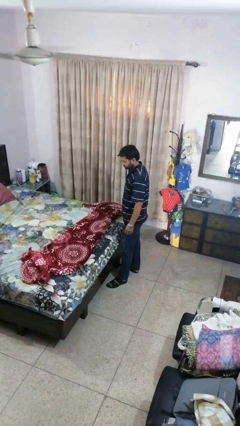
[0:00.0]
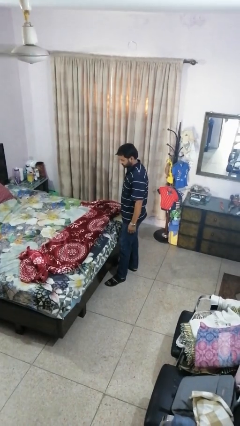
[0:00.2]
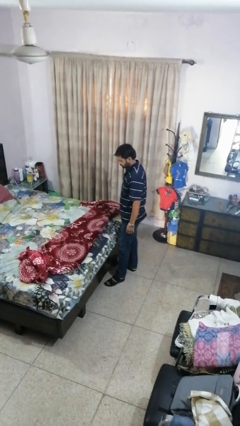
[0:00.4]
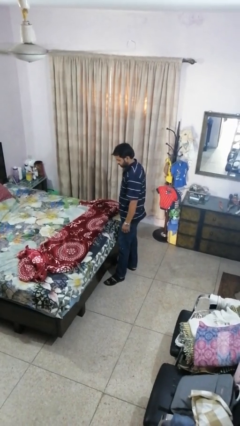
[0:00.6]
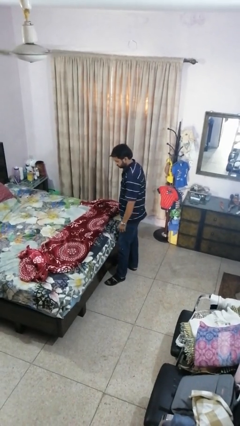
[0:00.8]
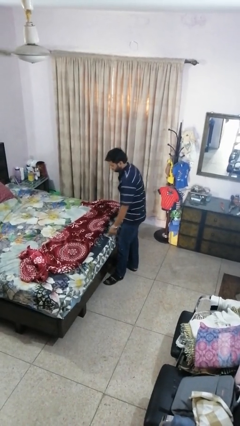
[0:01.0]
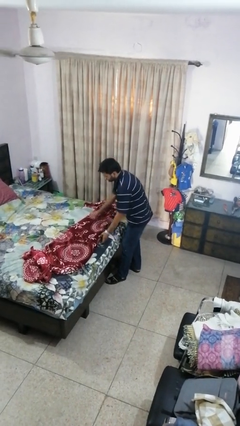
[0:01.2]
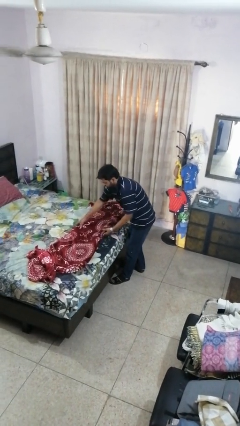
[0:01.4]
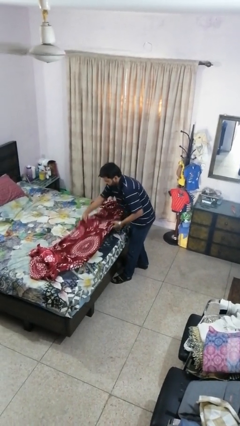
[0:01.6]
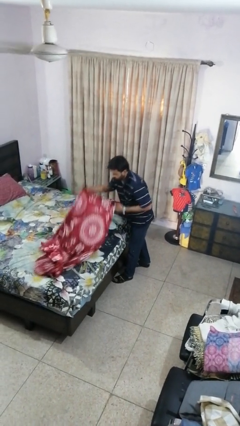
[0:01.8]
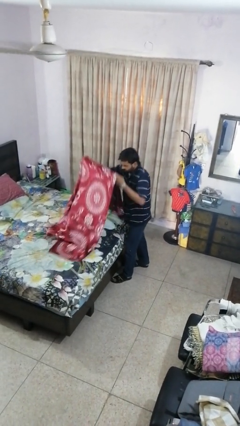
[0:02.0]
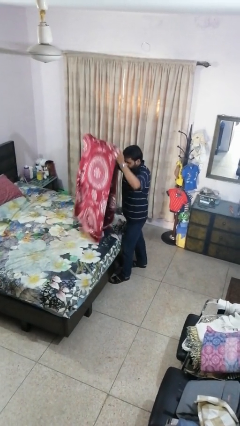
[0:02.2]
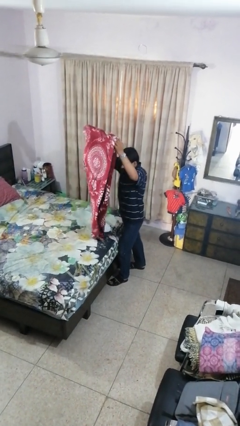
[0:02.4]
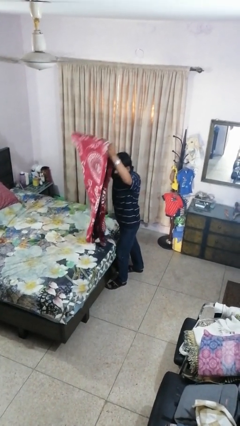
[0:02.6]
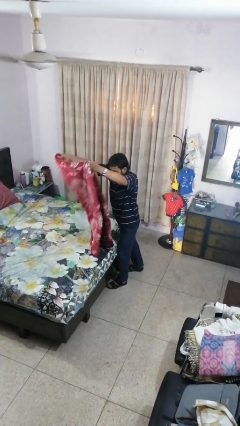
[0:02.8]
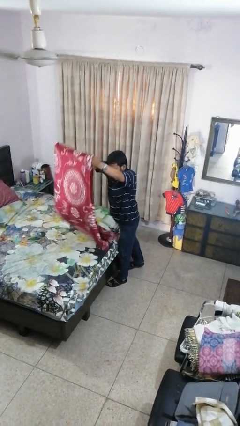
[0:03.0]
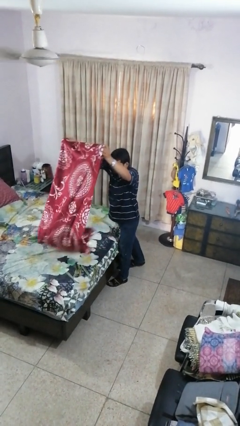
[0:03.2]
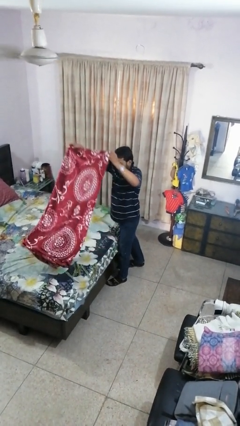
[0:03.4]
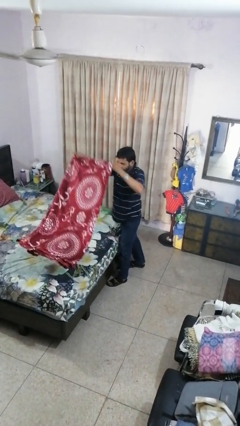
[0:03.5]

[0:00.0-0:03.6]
person crumples paper

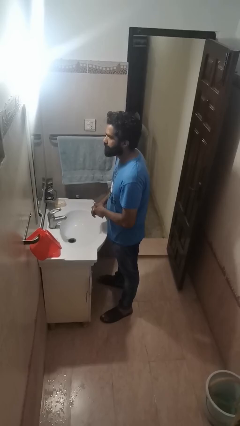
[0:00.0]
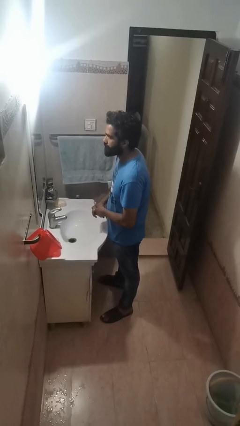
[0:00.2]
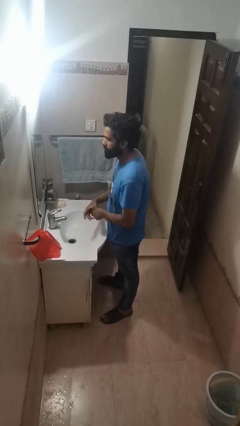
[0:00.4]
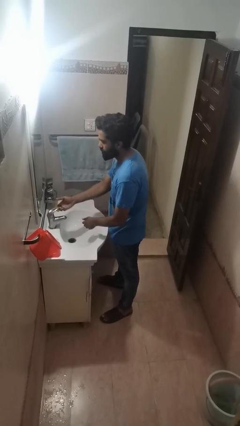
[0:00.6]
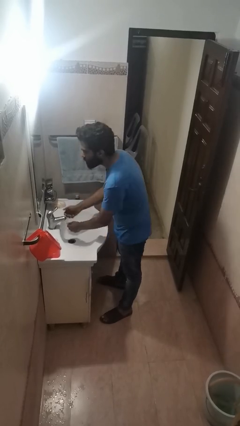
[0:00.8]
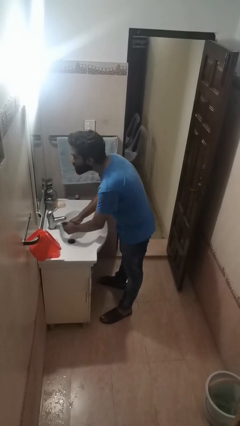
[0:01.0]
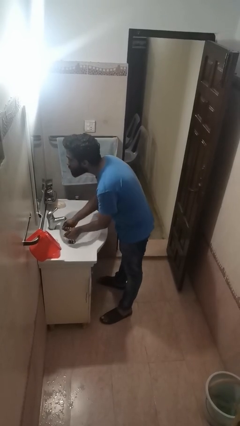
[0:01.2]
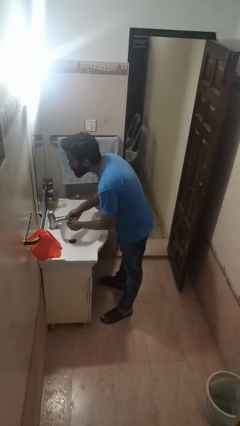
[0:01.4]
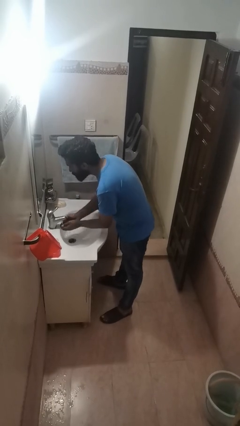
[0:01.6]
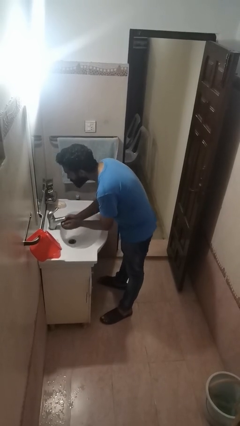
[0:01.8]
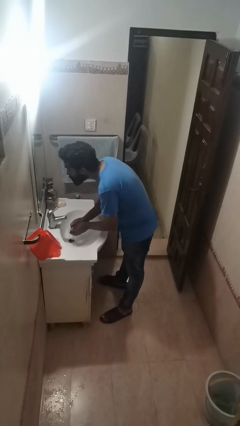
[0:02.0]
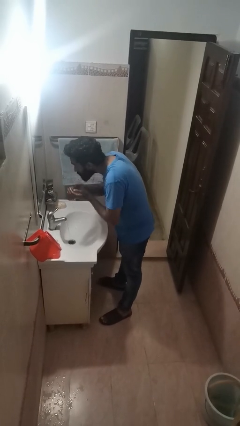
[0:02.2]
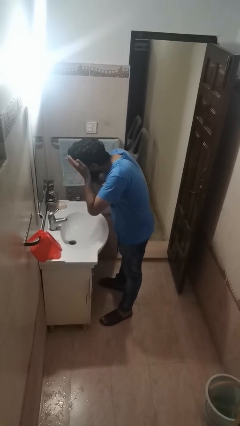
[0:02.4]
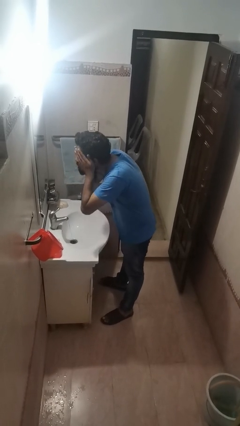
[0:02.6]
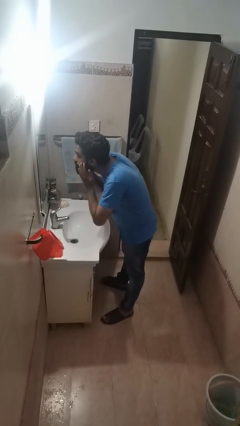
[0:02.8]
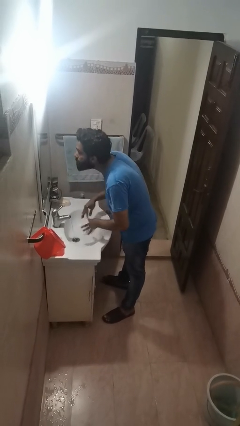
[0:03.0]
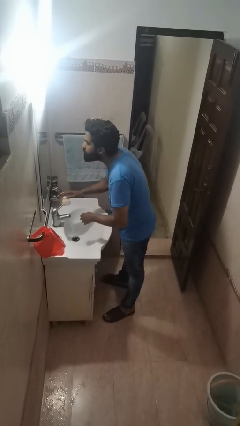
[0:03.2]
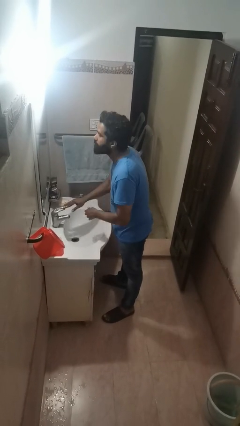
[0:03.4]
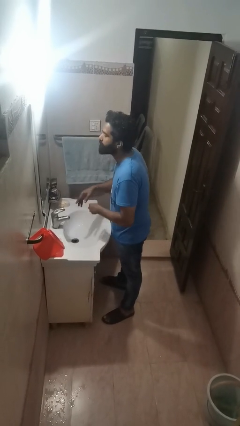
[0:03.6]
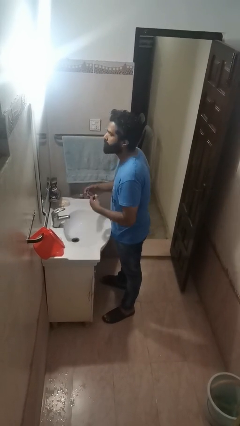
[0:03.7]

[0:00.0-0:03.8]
person washes face

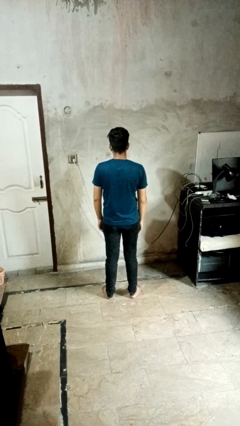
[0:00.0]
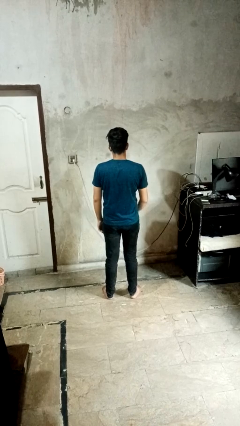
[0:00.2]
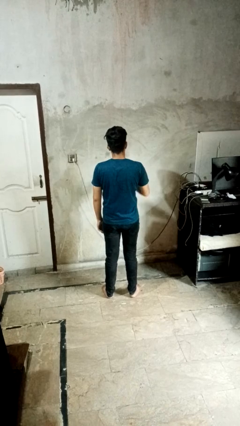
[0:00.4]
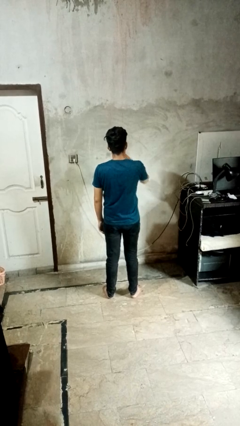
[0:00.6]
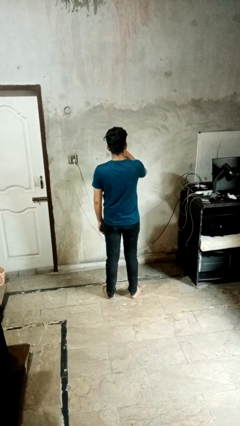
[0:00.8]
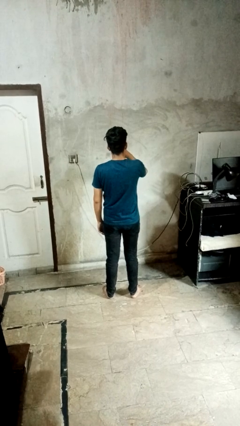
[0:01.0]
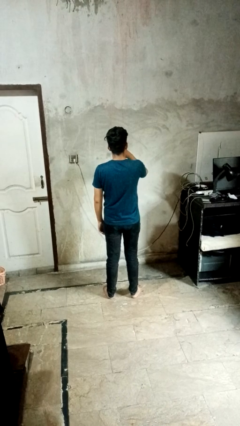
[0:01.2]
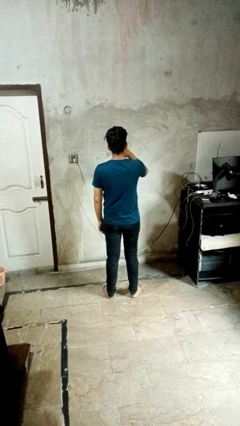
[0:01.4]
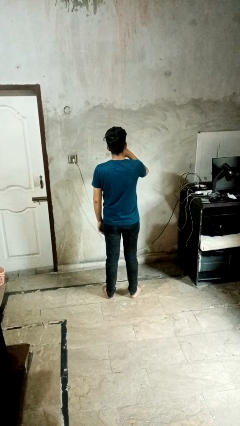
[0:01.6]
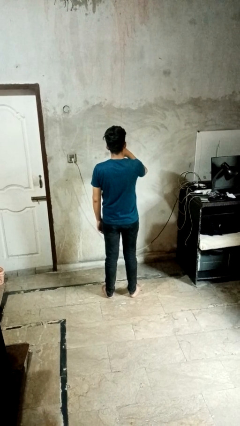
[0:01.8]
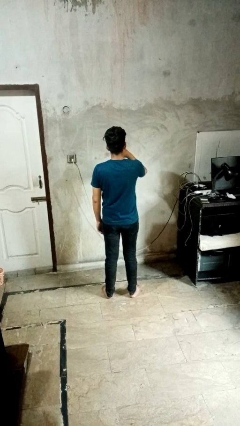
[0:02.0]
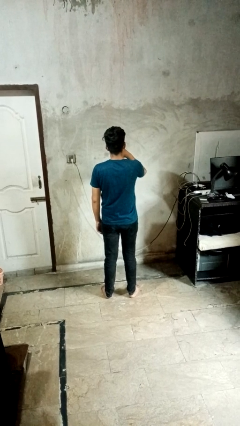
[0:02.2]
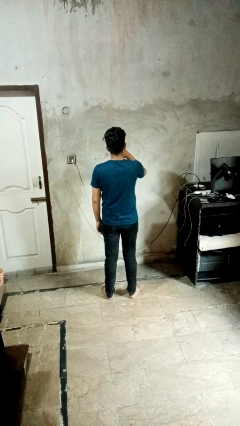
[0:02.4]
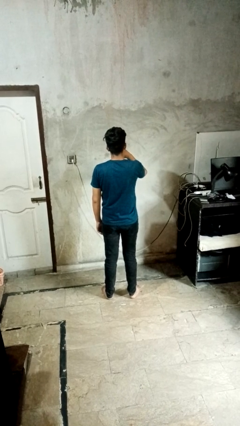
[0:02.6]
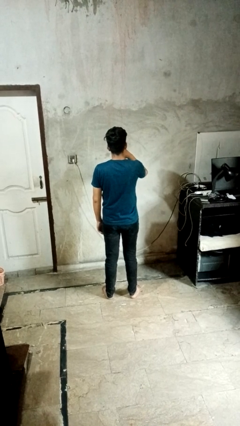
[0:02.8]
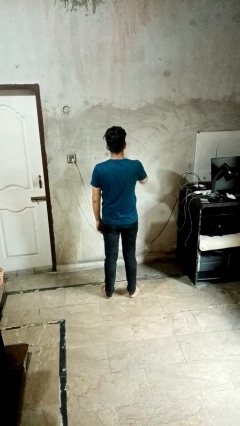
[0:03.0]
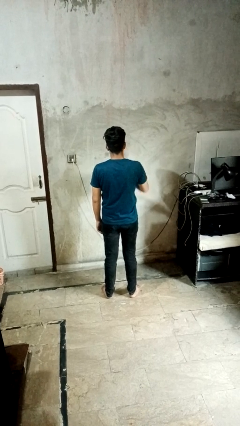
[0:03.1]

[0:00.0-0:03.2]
person yawns

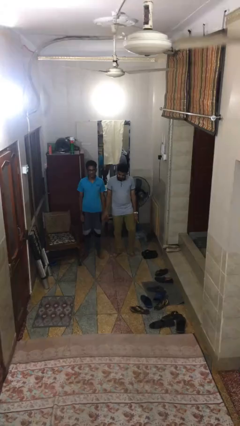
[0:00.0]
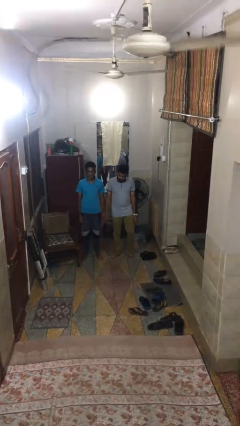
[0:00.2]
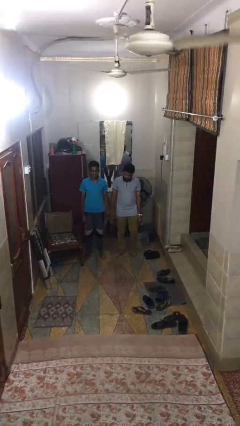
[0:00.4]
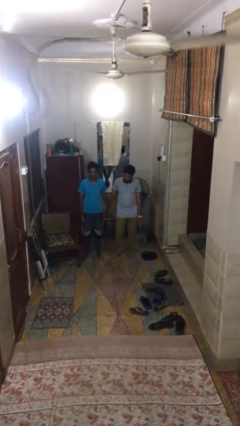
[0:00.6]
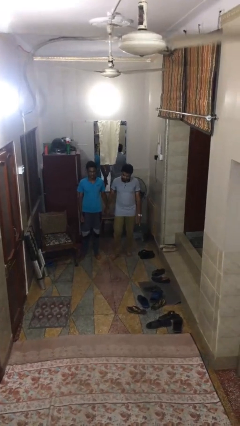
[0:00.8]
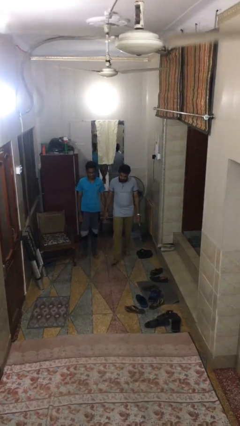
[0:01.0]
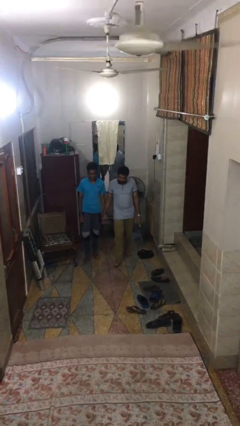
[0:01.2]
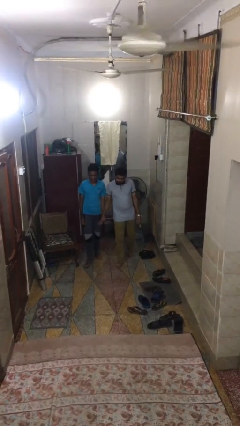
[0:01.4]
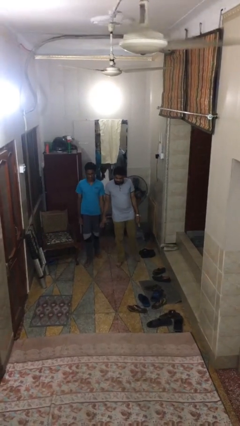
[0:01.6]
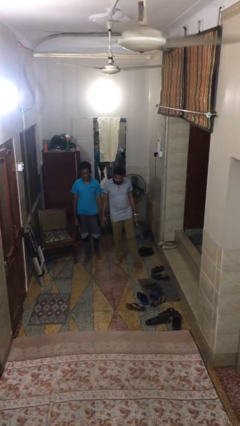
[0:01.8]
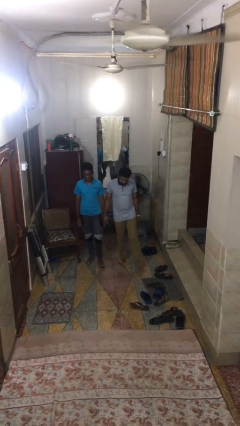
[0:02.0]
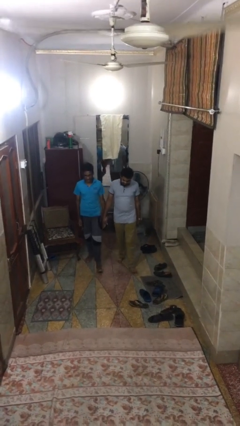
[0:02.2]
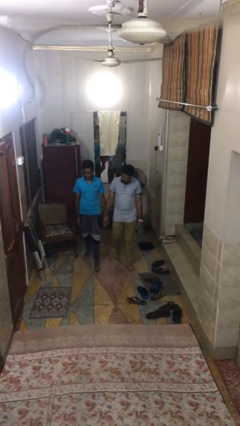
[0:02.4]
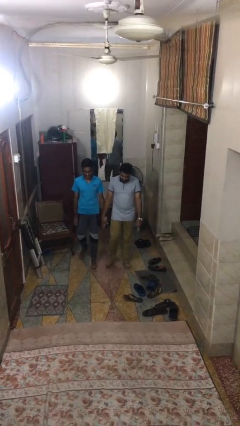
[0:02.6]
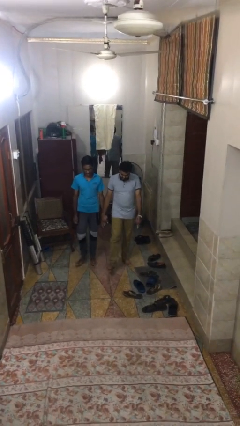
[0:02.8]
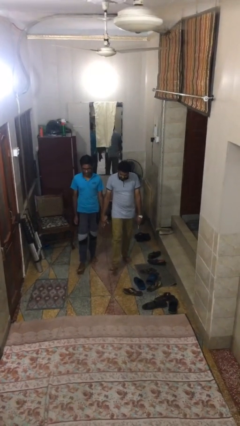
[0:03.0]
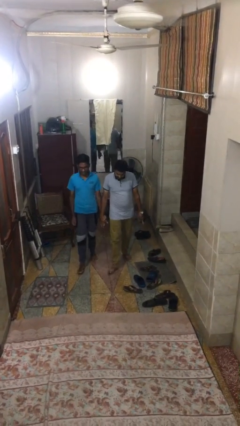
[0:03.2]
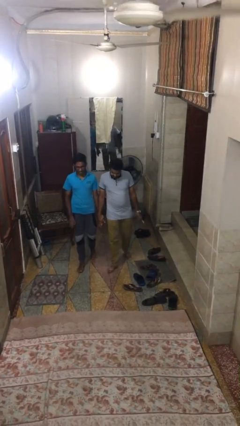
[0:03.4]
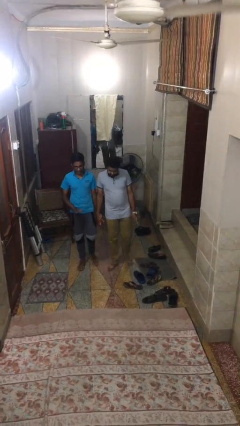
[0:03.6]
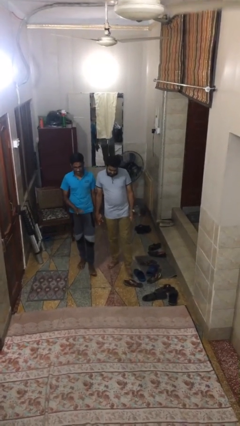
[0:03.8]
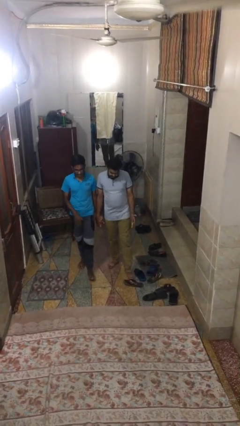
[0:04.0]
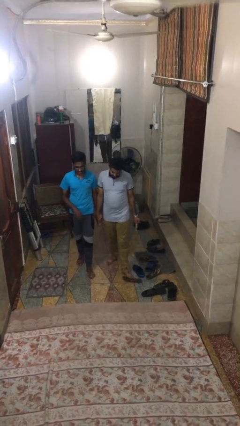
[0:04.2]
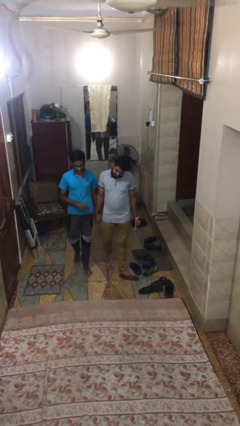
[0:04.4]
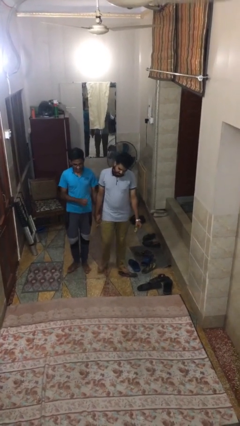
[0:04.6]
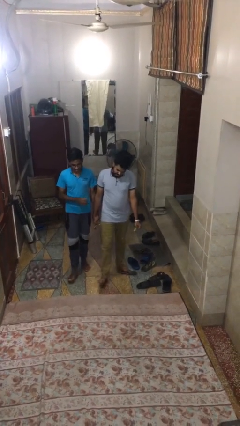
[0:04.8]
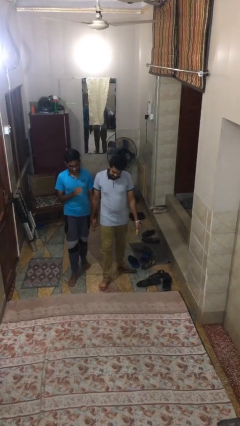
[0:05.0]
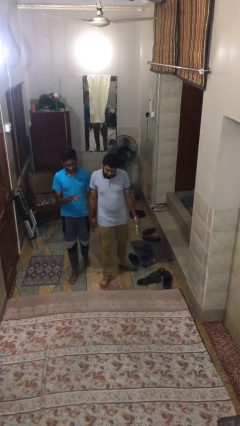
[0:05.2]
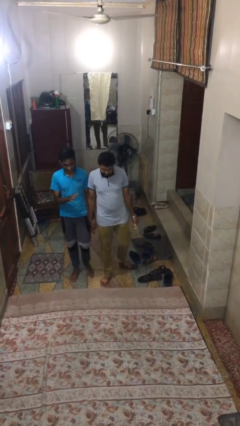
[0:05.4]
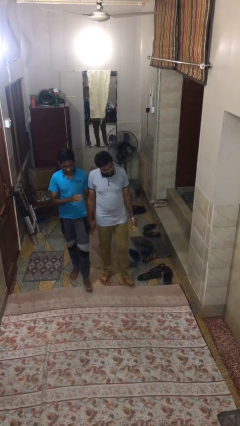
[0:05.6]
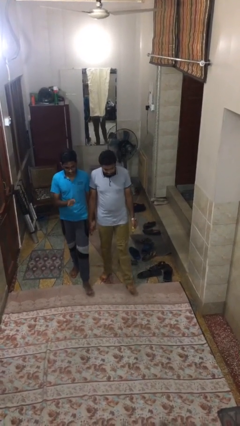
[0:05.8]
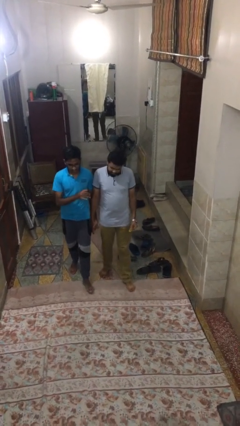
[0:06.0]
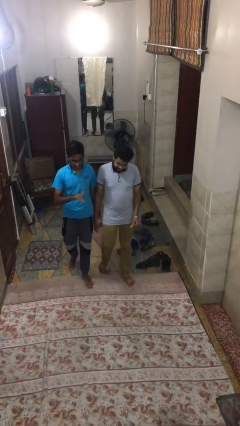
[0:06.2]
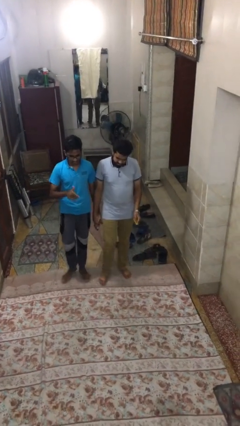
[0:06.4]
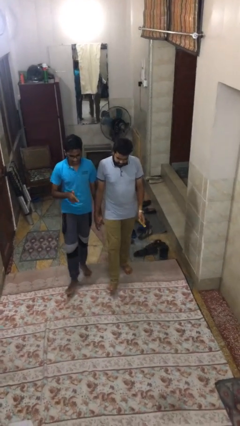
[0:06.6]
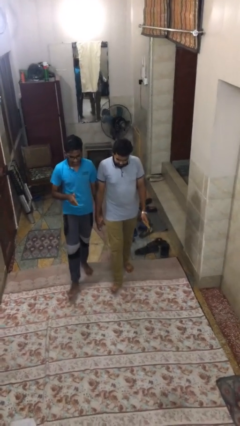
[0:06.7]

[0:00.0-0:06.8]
person holds hand

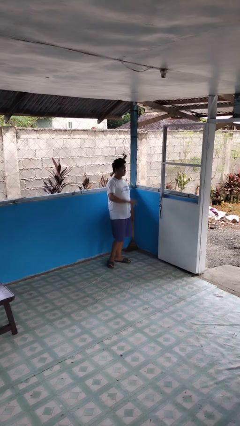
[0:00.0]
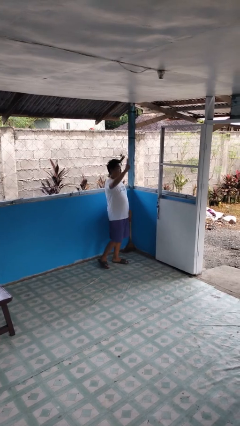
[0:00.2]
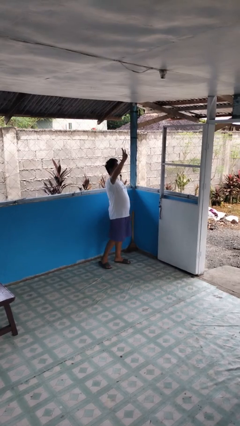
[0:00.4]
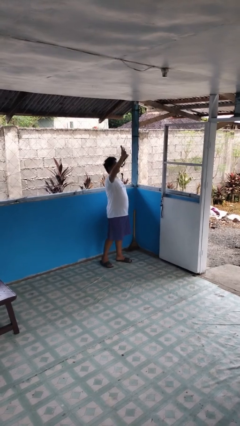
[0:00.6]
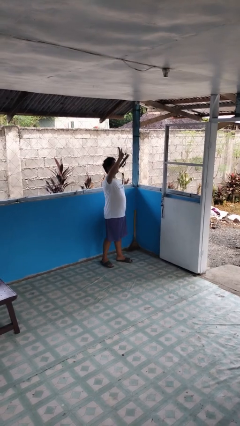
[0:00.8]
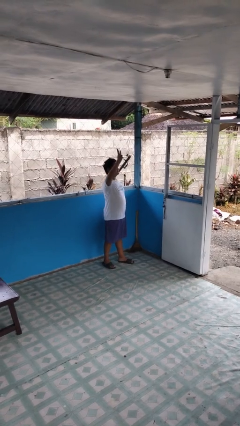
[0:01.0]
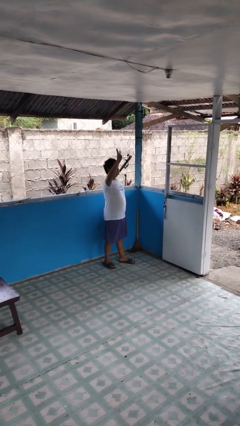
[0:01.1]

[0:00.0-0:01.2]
person gestures number three
